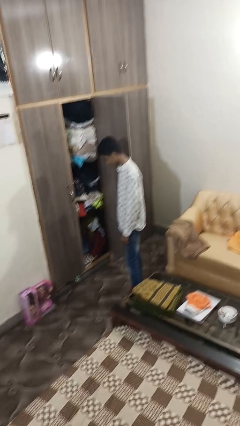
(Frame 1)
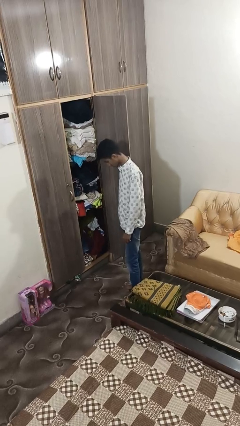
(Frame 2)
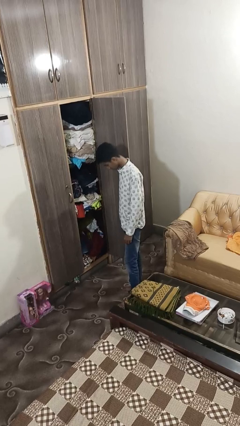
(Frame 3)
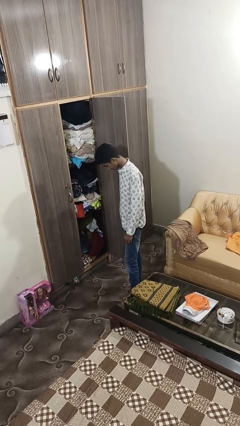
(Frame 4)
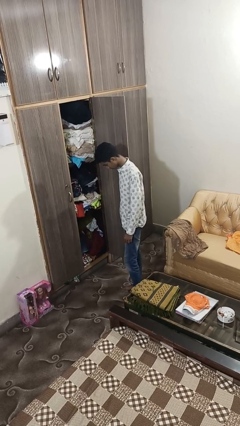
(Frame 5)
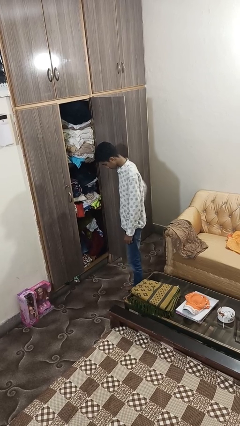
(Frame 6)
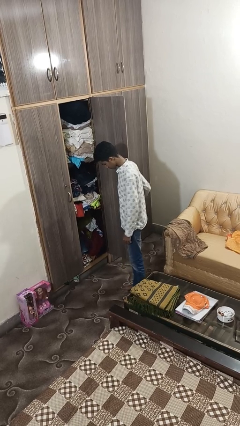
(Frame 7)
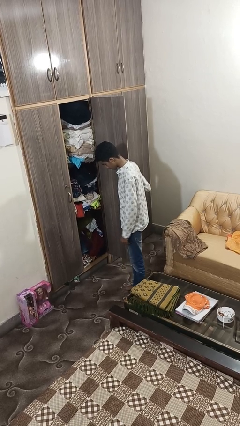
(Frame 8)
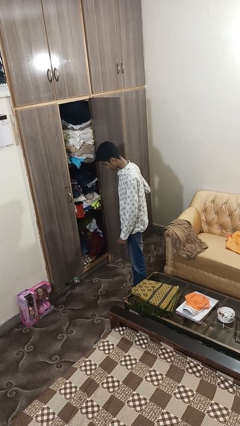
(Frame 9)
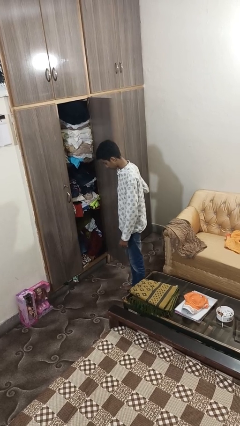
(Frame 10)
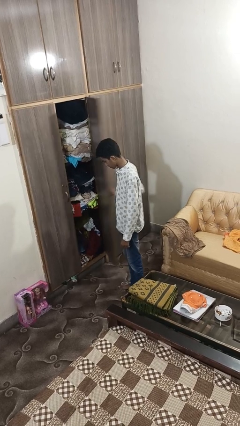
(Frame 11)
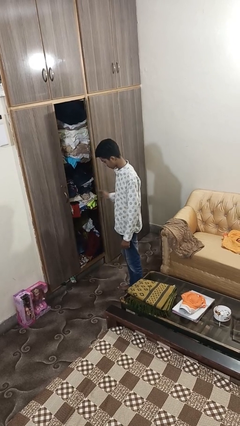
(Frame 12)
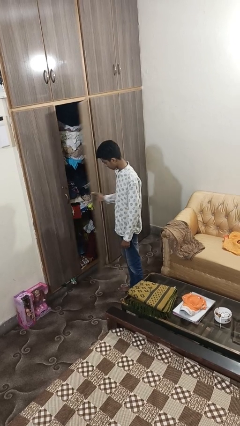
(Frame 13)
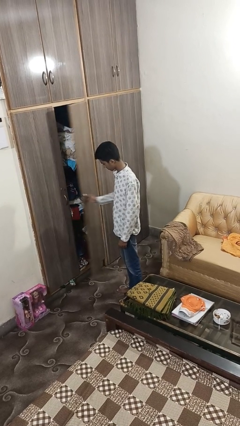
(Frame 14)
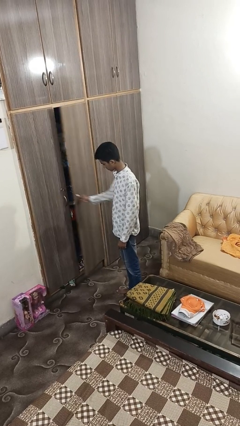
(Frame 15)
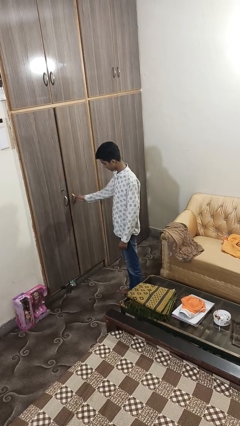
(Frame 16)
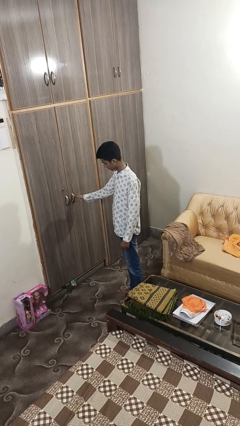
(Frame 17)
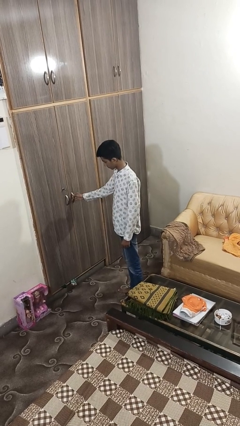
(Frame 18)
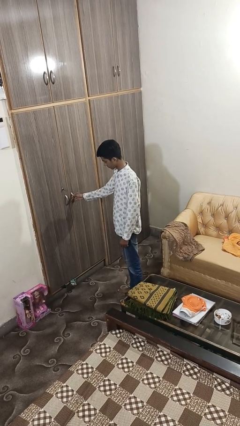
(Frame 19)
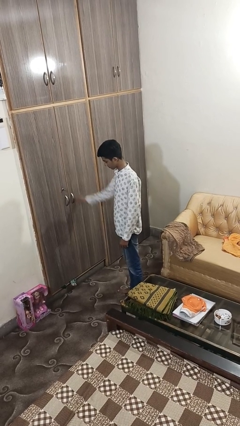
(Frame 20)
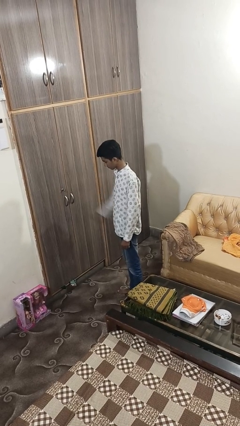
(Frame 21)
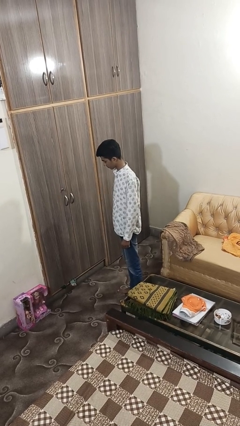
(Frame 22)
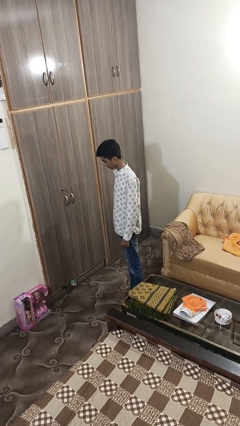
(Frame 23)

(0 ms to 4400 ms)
person closes closet door

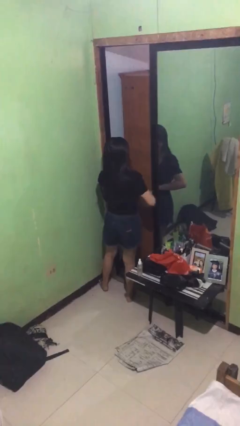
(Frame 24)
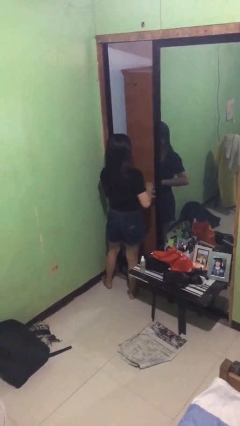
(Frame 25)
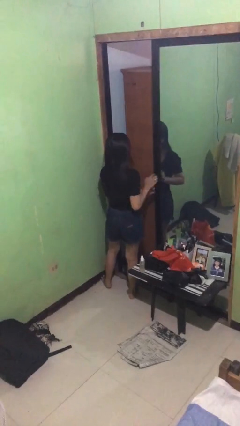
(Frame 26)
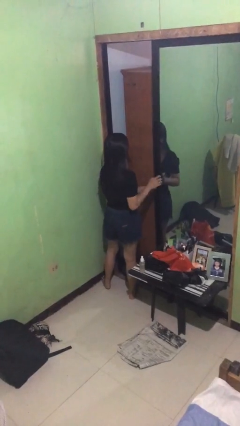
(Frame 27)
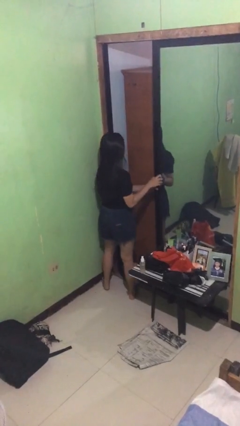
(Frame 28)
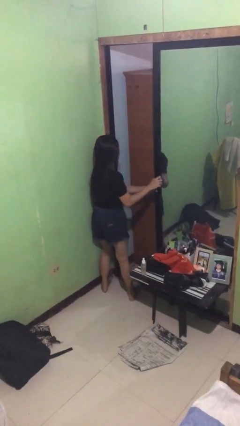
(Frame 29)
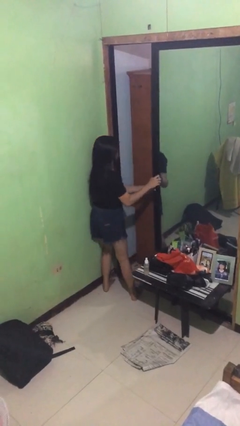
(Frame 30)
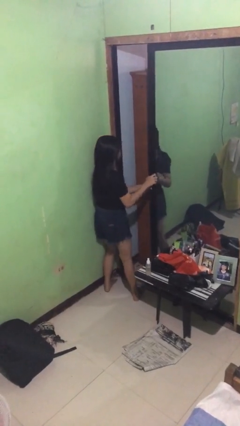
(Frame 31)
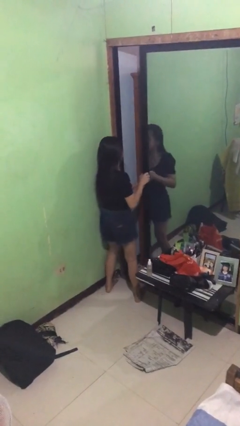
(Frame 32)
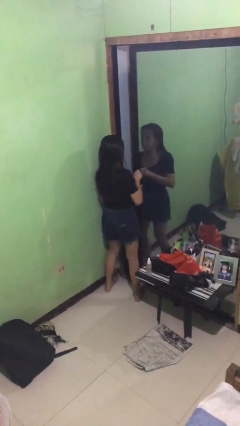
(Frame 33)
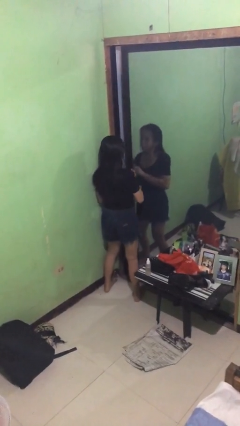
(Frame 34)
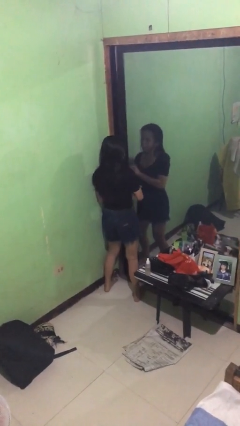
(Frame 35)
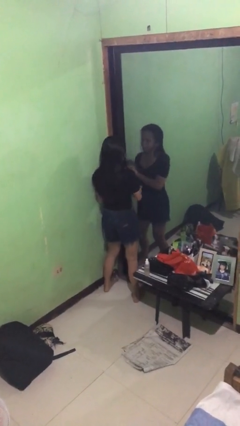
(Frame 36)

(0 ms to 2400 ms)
person closes sliding door

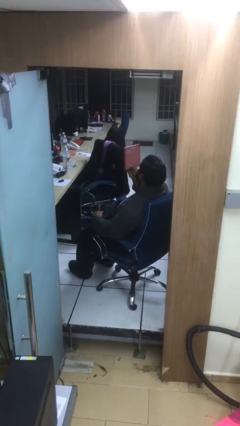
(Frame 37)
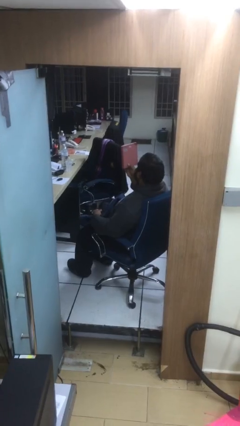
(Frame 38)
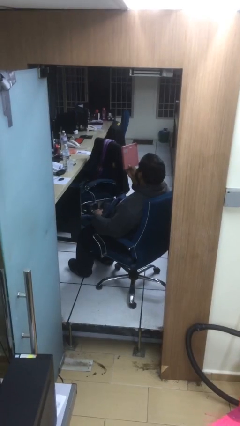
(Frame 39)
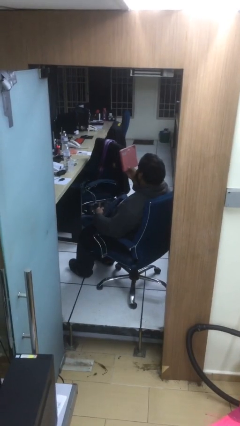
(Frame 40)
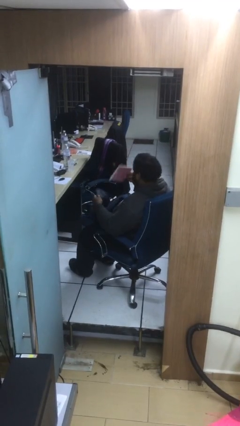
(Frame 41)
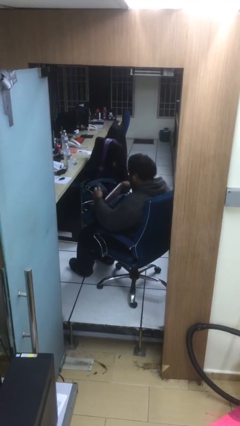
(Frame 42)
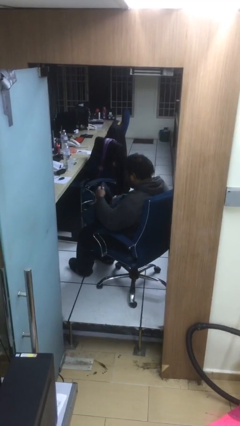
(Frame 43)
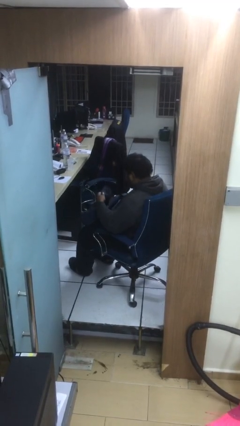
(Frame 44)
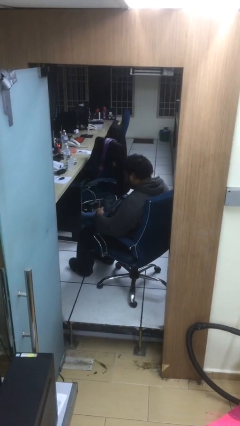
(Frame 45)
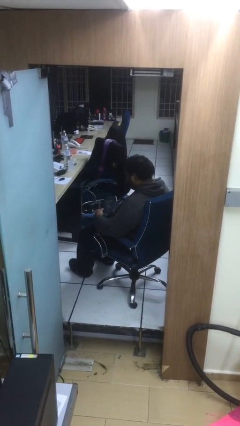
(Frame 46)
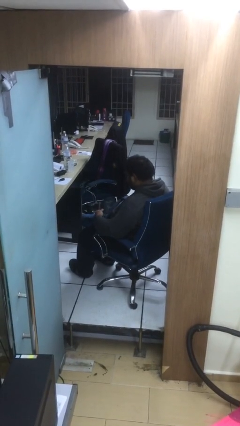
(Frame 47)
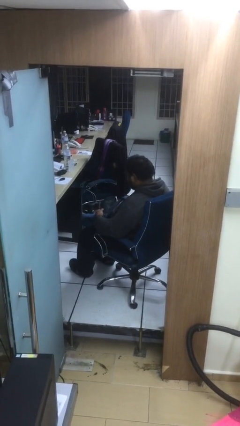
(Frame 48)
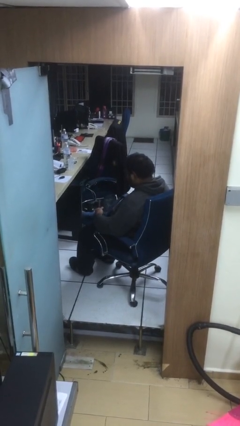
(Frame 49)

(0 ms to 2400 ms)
person puts object into backpack

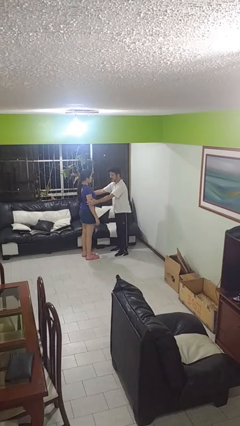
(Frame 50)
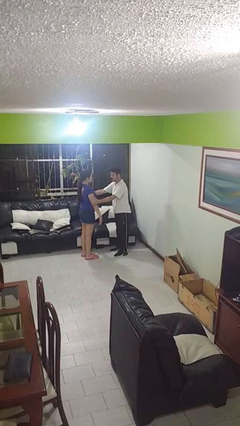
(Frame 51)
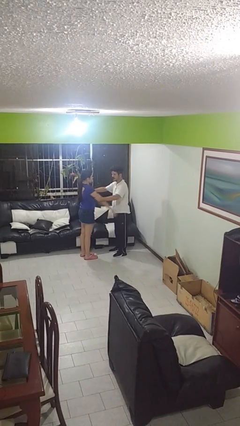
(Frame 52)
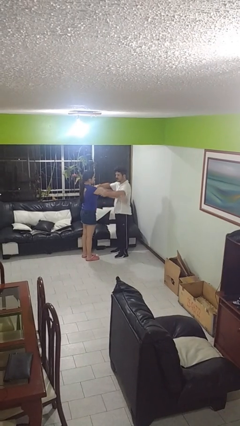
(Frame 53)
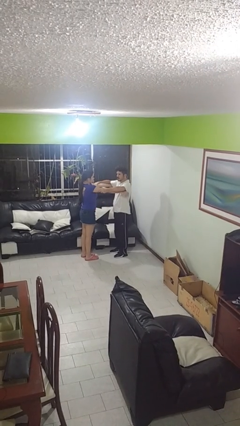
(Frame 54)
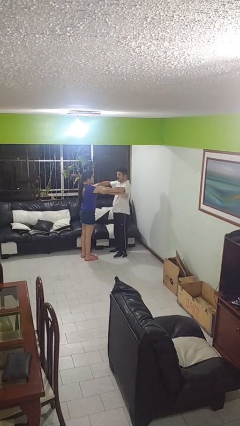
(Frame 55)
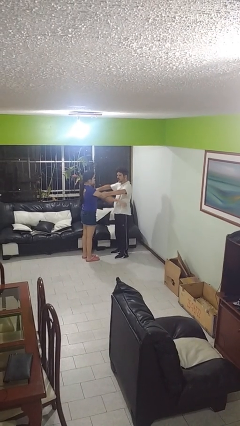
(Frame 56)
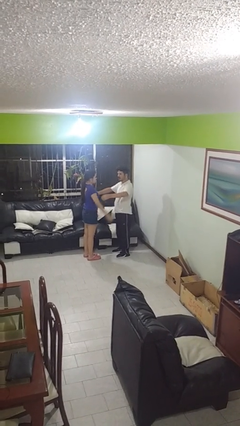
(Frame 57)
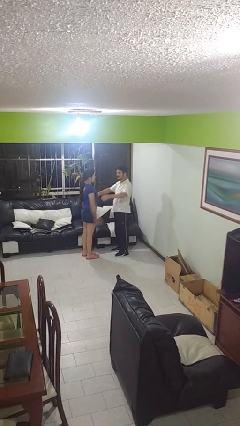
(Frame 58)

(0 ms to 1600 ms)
person grabs person by bicep

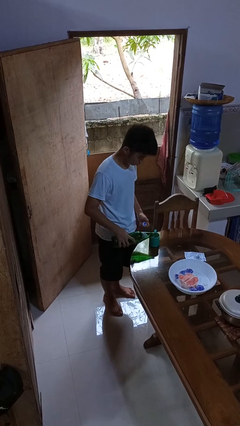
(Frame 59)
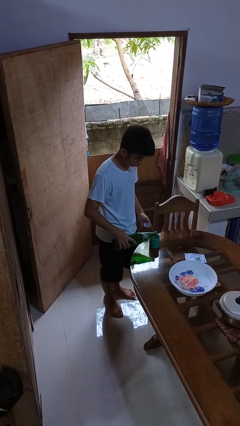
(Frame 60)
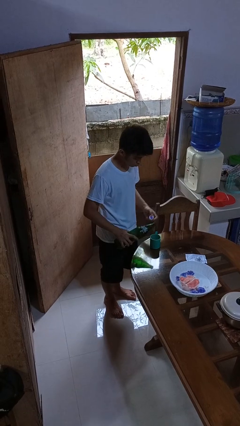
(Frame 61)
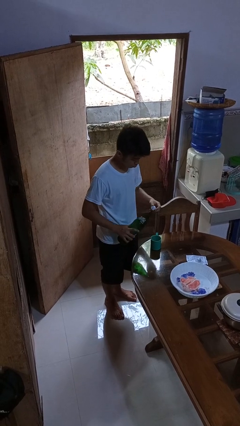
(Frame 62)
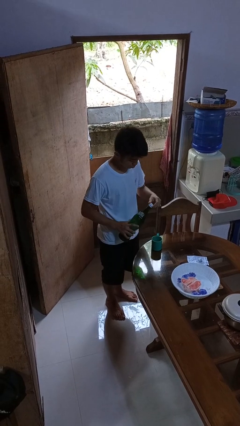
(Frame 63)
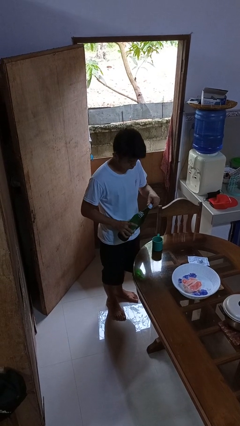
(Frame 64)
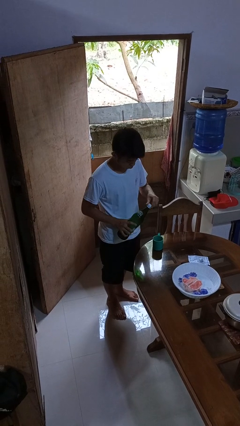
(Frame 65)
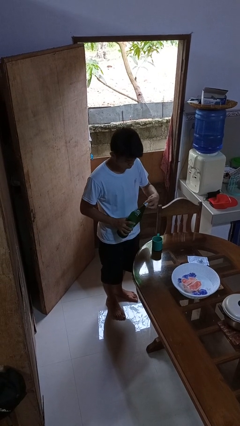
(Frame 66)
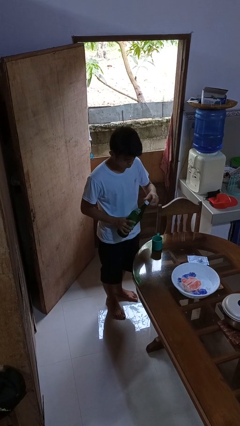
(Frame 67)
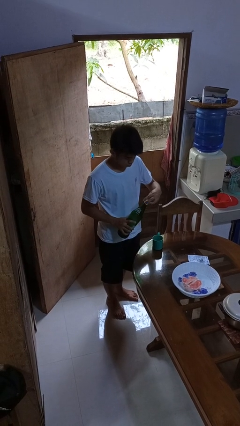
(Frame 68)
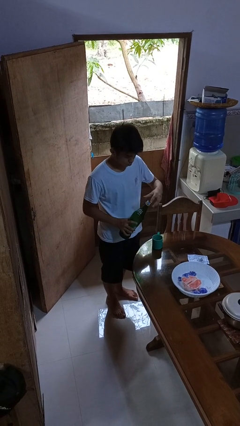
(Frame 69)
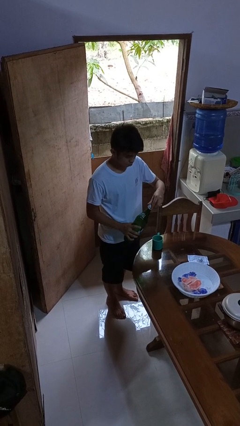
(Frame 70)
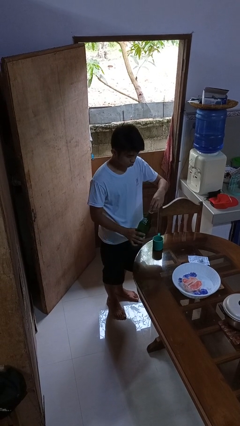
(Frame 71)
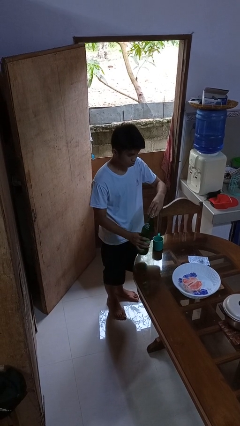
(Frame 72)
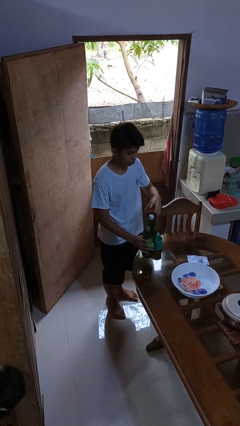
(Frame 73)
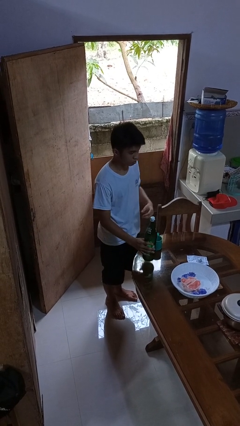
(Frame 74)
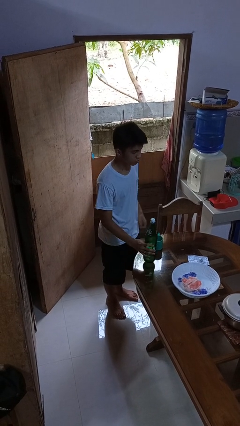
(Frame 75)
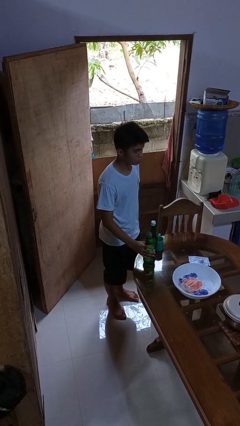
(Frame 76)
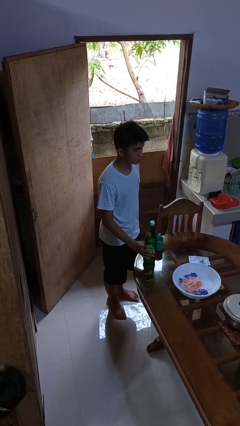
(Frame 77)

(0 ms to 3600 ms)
person screws lid to bottle

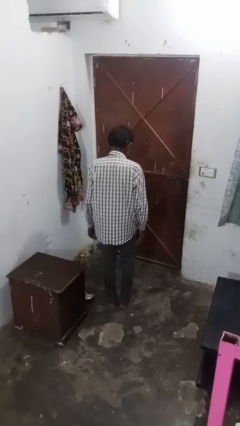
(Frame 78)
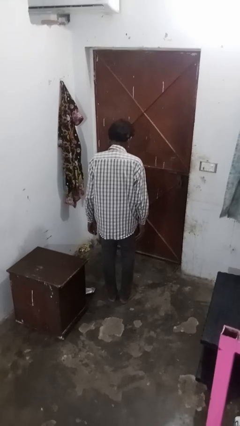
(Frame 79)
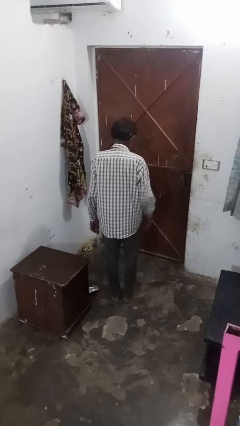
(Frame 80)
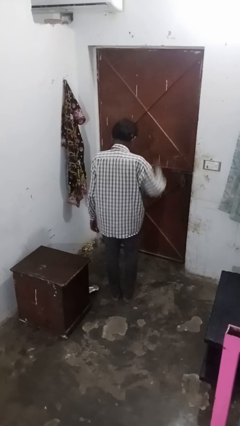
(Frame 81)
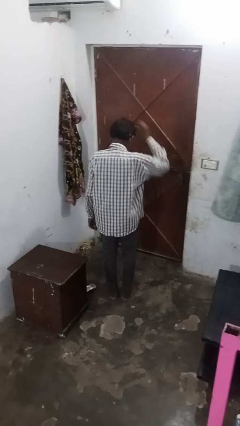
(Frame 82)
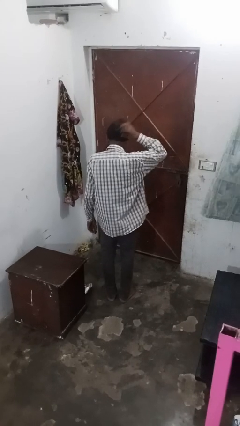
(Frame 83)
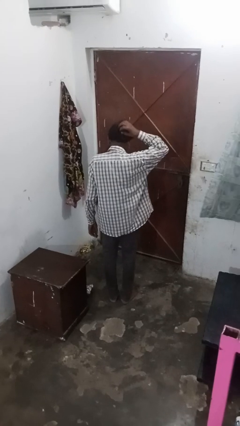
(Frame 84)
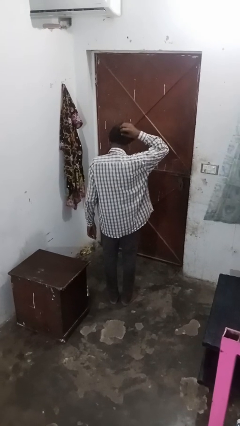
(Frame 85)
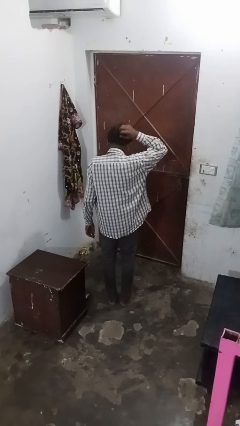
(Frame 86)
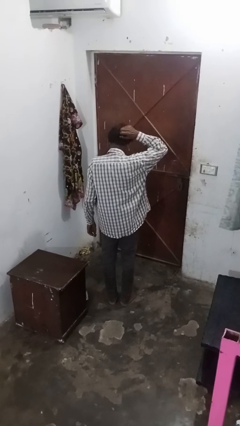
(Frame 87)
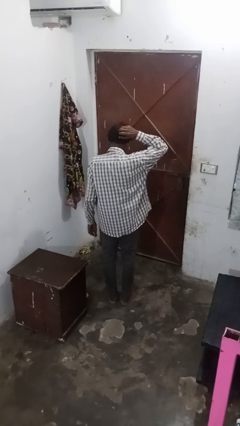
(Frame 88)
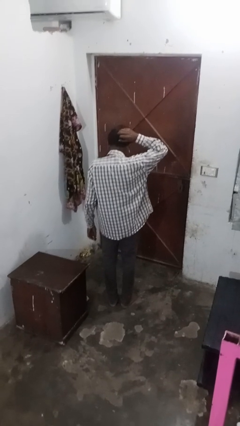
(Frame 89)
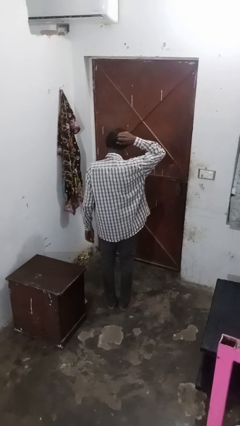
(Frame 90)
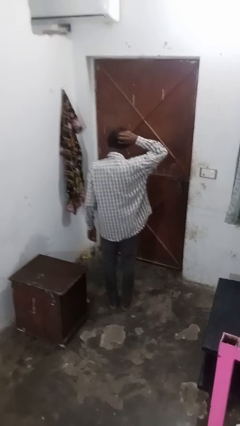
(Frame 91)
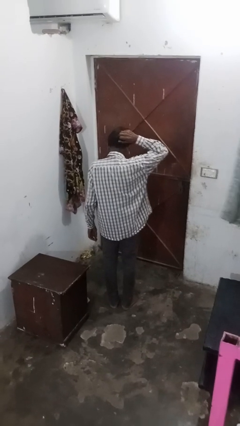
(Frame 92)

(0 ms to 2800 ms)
person strokes hair
